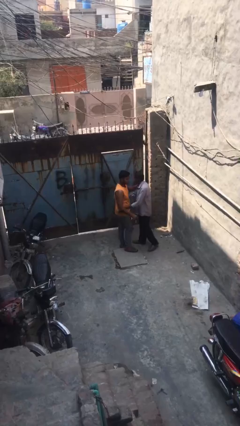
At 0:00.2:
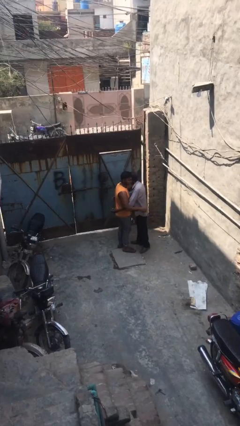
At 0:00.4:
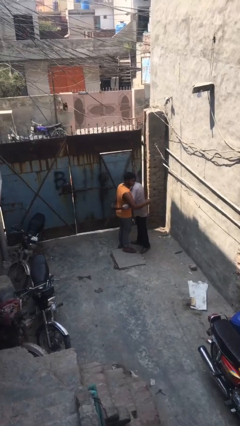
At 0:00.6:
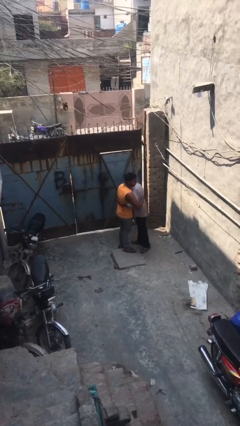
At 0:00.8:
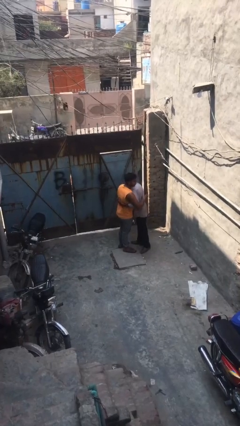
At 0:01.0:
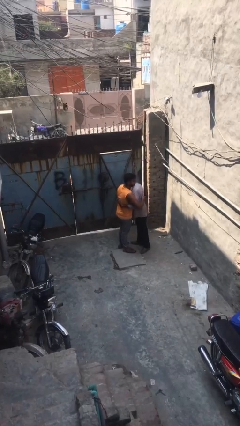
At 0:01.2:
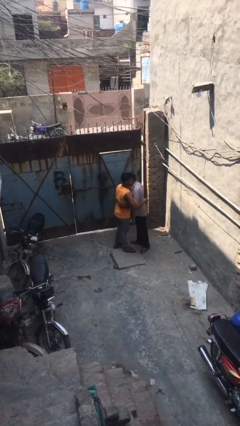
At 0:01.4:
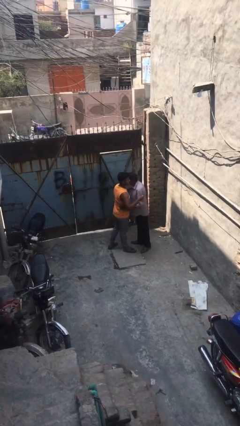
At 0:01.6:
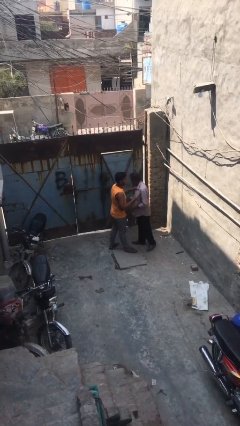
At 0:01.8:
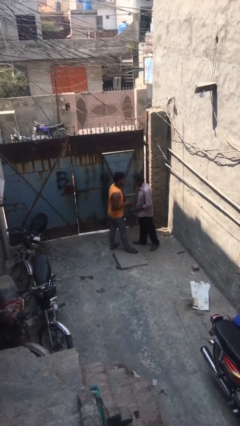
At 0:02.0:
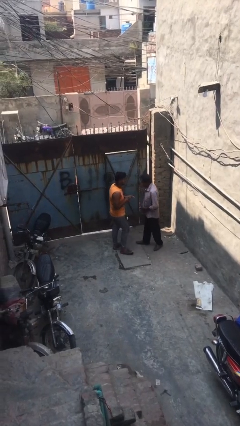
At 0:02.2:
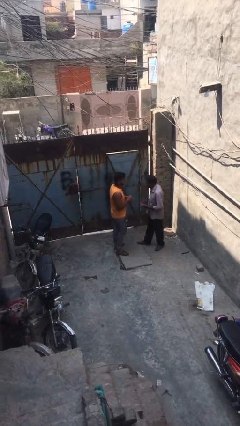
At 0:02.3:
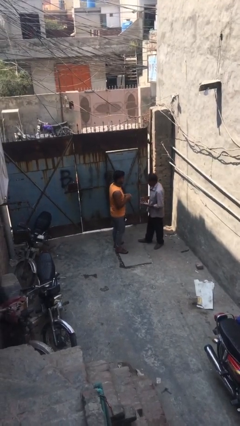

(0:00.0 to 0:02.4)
person embraces person

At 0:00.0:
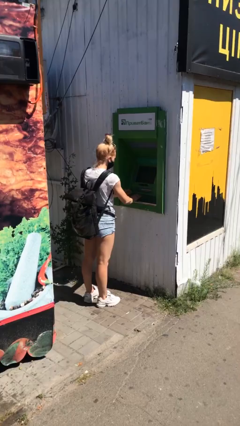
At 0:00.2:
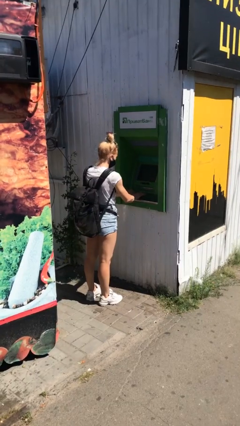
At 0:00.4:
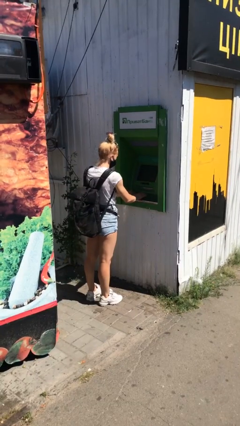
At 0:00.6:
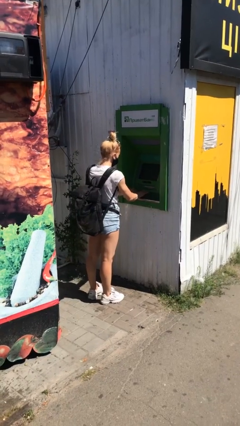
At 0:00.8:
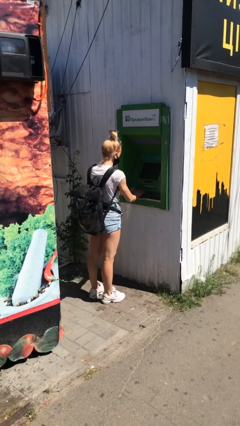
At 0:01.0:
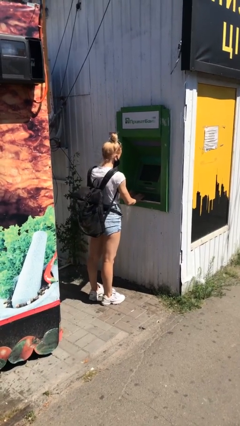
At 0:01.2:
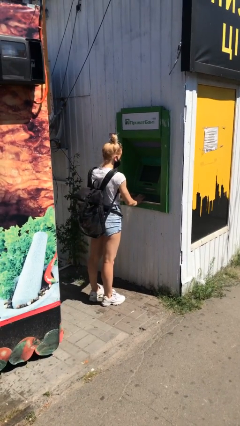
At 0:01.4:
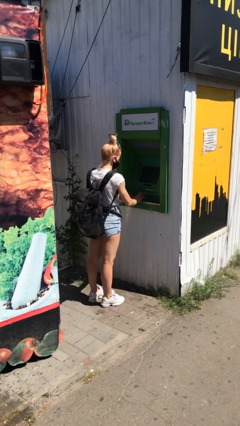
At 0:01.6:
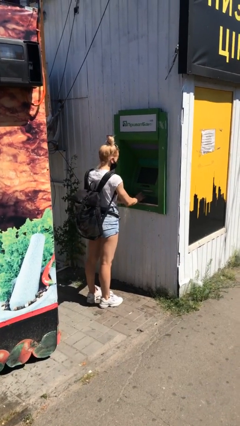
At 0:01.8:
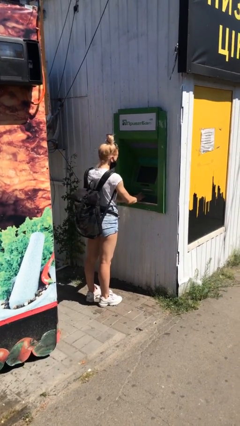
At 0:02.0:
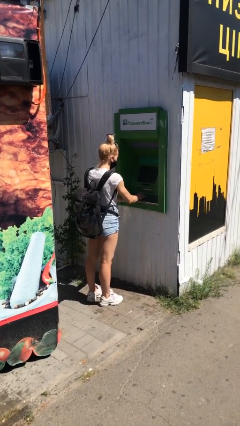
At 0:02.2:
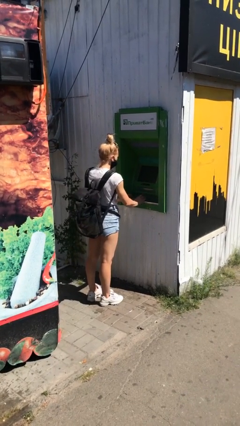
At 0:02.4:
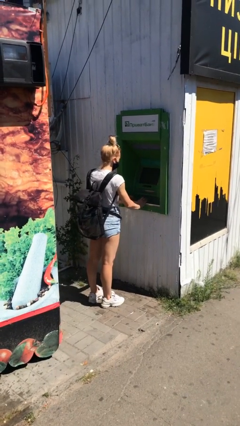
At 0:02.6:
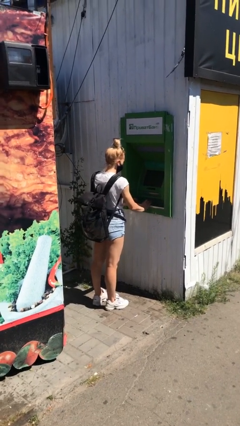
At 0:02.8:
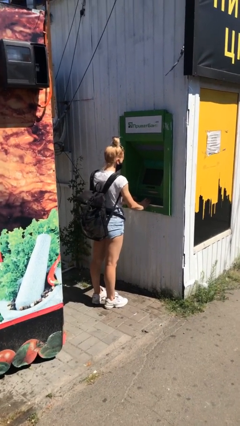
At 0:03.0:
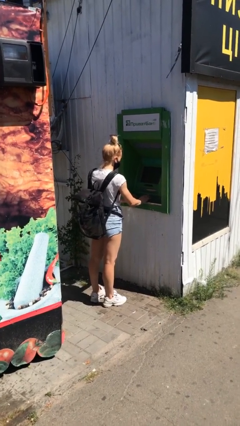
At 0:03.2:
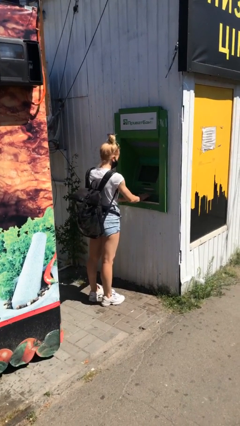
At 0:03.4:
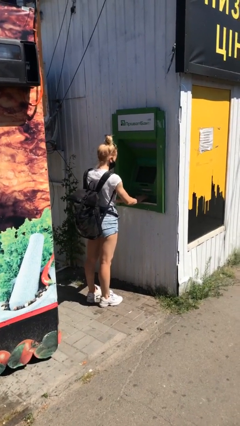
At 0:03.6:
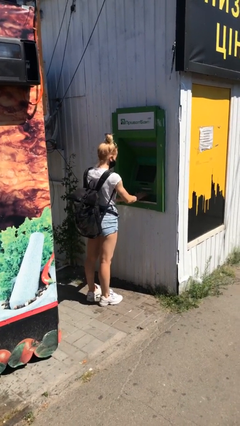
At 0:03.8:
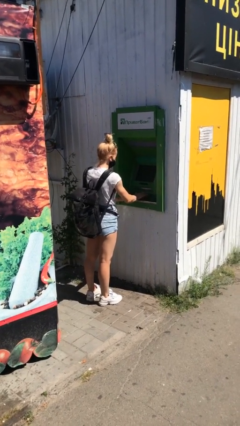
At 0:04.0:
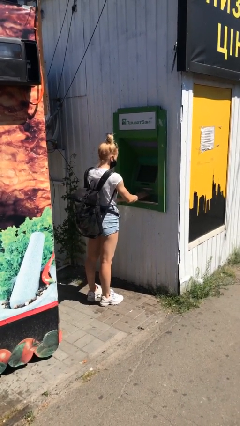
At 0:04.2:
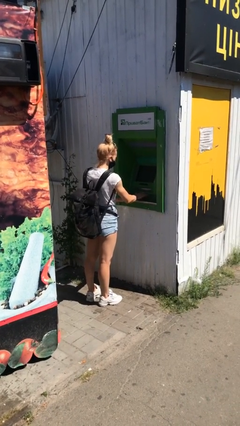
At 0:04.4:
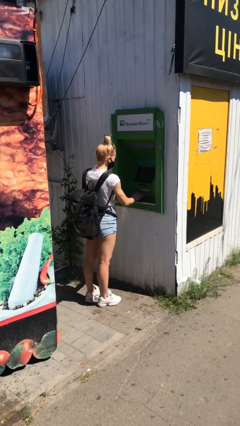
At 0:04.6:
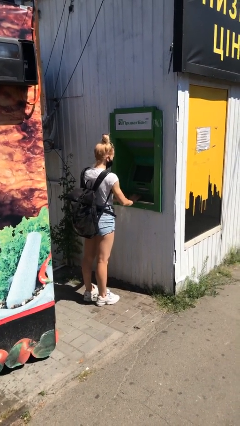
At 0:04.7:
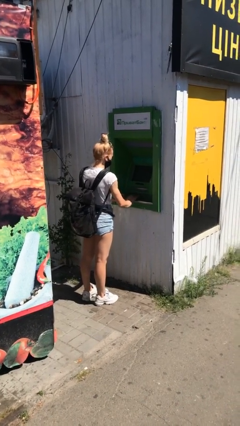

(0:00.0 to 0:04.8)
person purchases from machine

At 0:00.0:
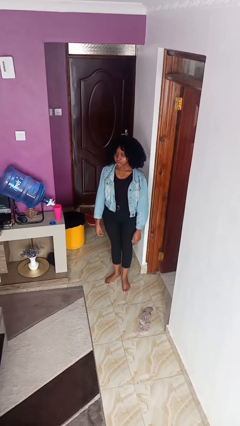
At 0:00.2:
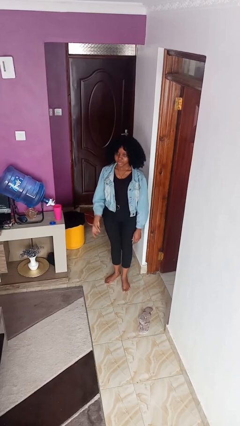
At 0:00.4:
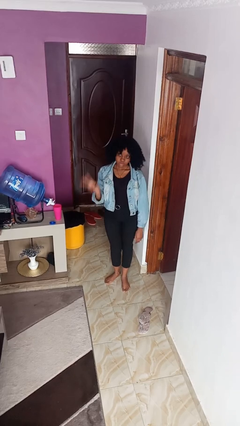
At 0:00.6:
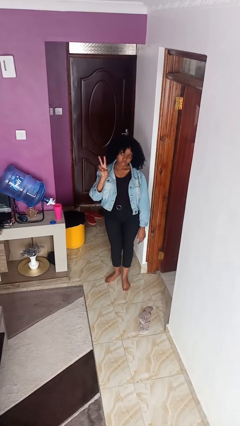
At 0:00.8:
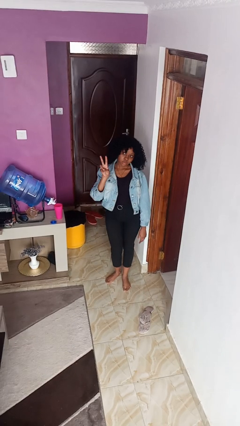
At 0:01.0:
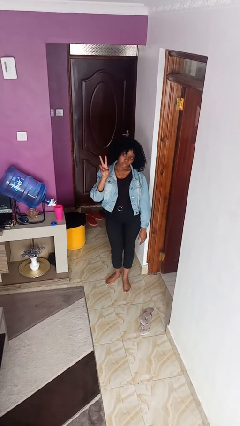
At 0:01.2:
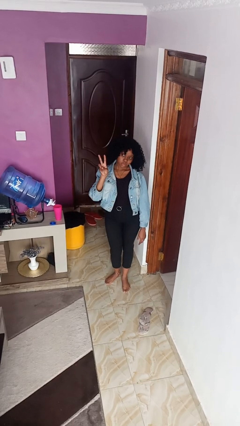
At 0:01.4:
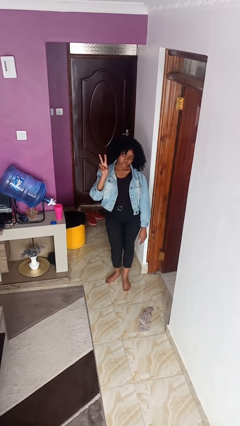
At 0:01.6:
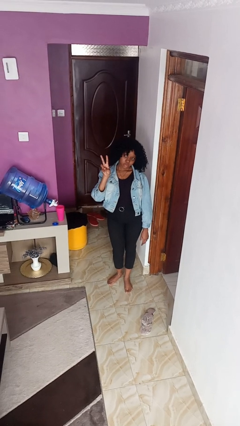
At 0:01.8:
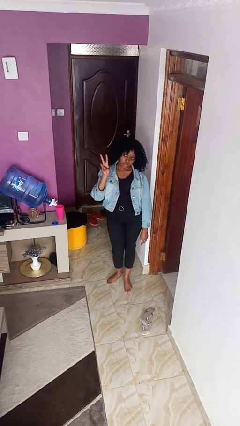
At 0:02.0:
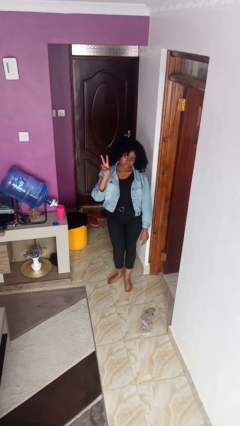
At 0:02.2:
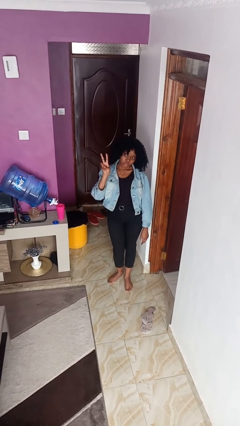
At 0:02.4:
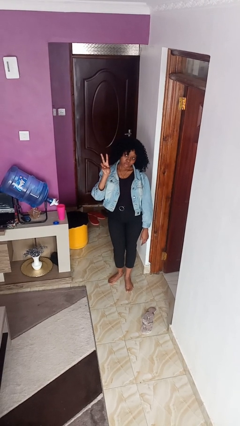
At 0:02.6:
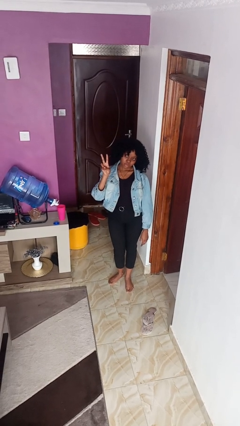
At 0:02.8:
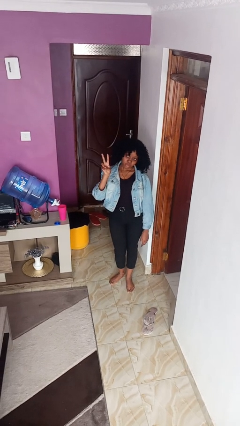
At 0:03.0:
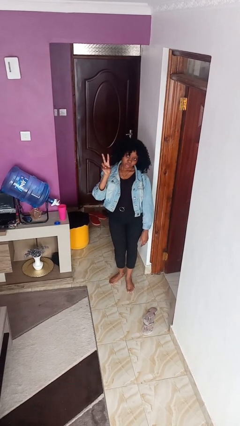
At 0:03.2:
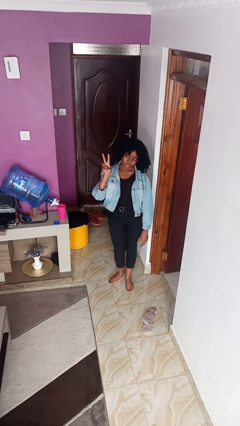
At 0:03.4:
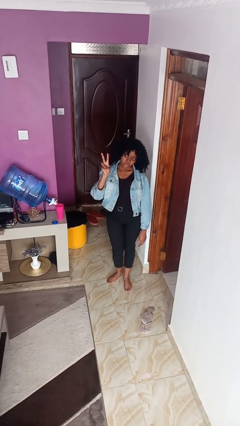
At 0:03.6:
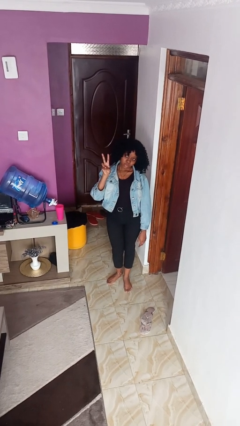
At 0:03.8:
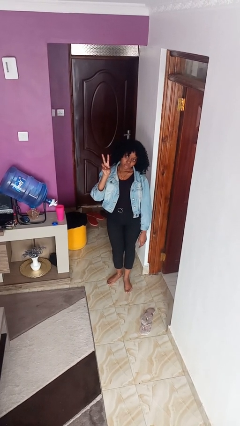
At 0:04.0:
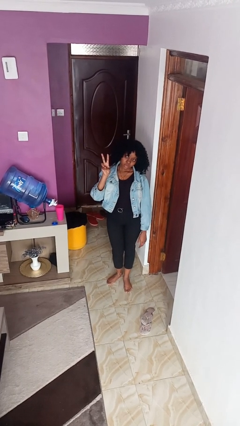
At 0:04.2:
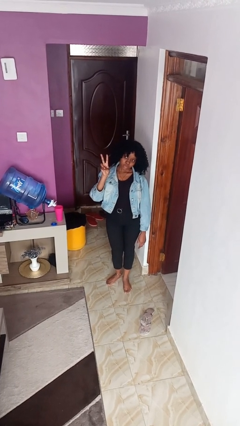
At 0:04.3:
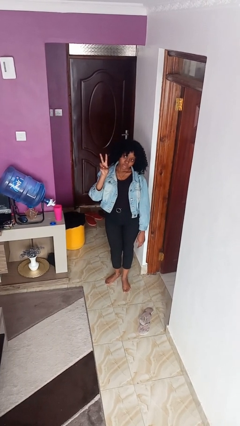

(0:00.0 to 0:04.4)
person gestures peace

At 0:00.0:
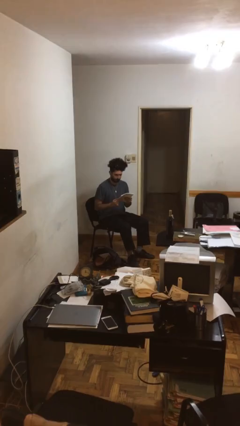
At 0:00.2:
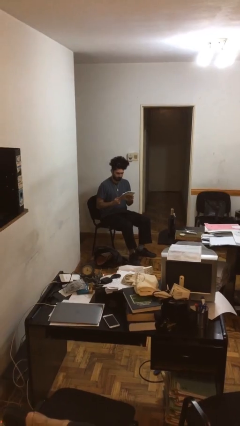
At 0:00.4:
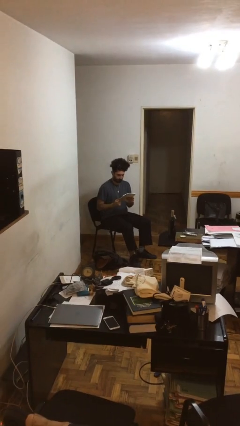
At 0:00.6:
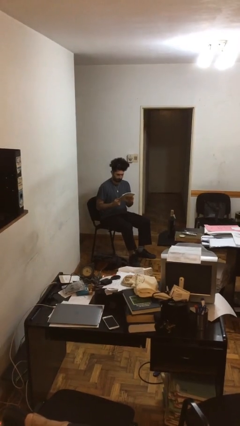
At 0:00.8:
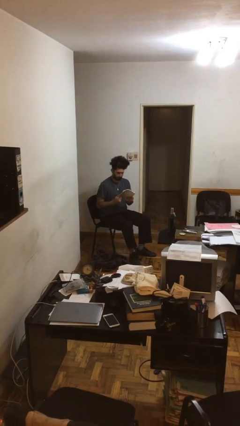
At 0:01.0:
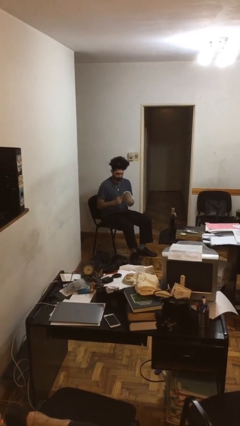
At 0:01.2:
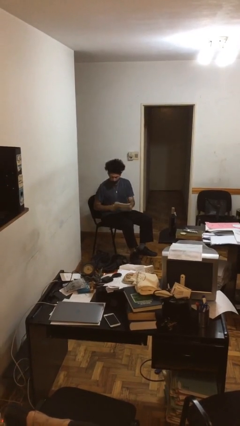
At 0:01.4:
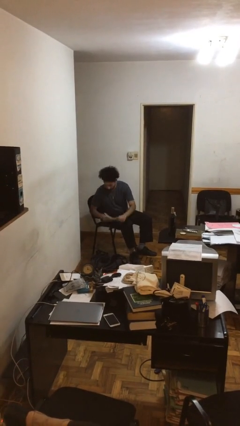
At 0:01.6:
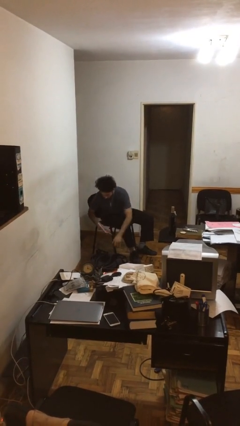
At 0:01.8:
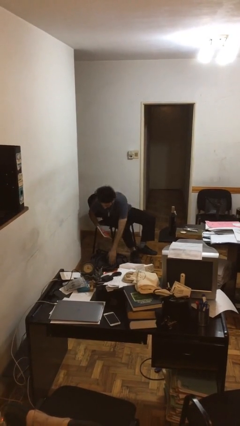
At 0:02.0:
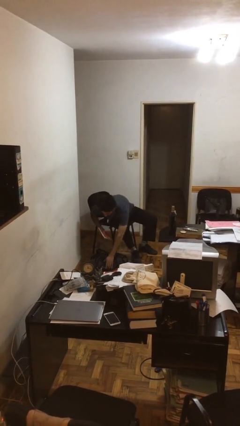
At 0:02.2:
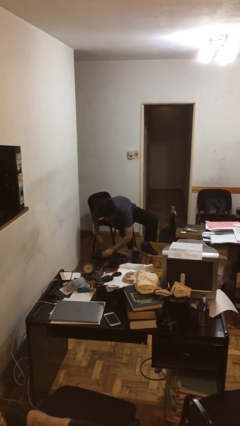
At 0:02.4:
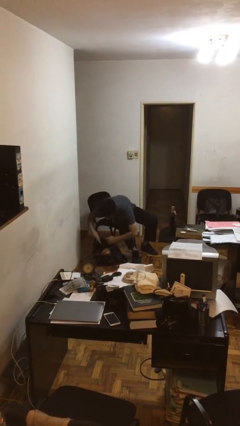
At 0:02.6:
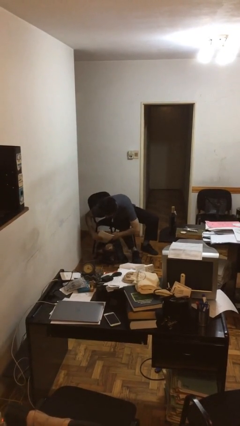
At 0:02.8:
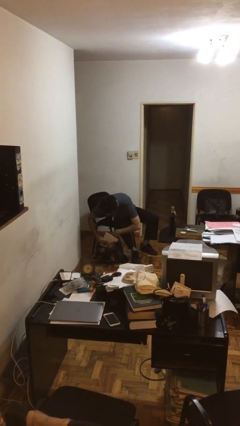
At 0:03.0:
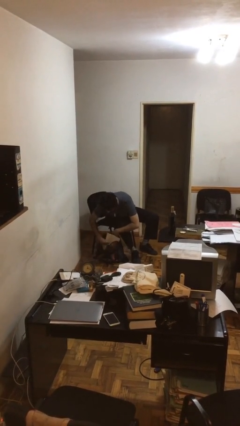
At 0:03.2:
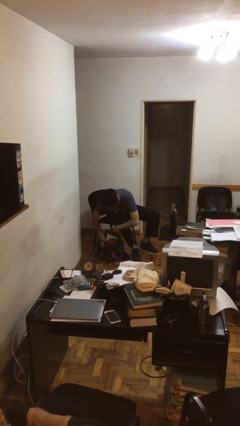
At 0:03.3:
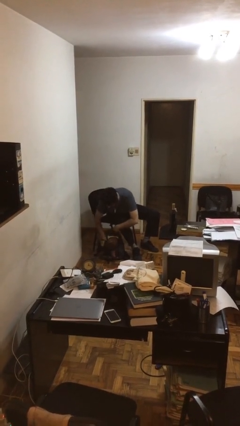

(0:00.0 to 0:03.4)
person puts object into backpack

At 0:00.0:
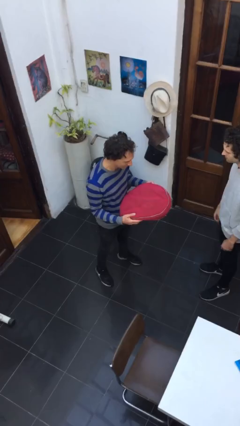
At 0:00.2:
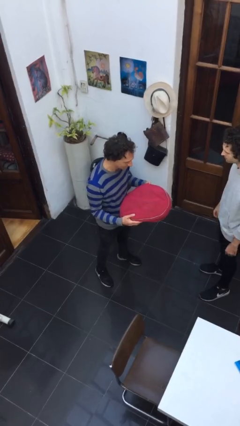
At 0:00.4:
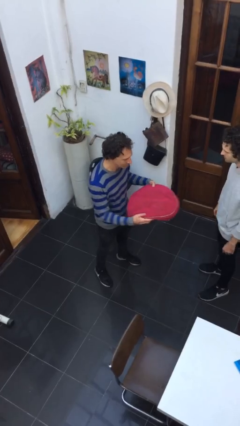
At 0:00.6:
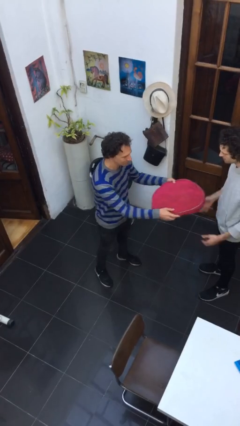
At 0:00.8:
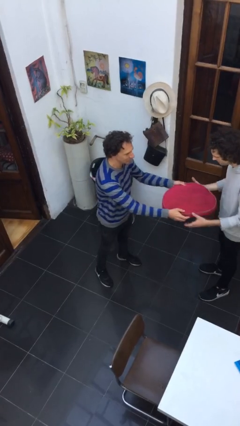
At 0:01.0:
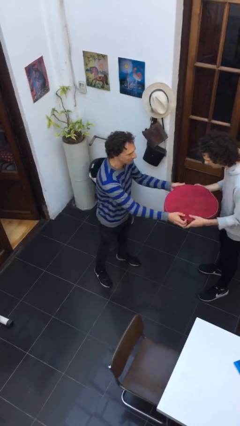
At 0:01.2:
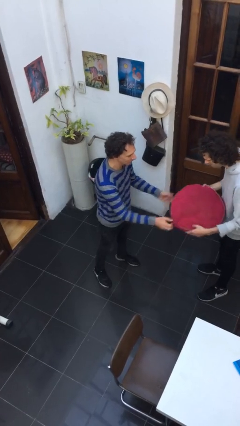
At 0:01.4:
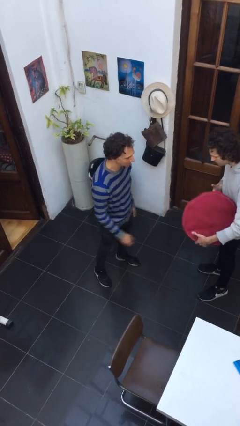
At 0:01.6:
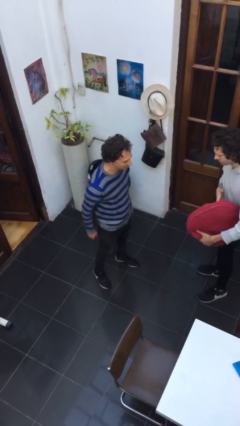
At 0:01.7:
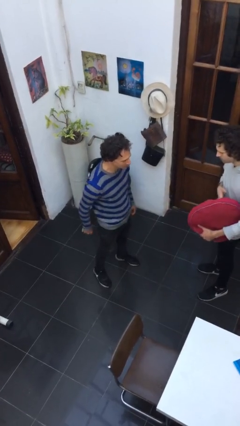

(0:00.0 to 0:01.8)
person transfers object to person

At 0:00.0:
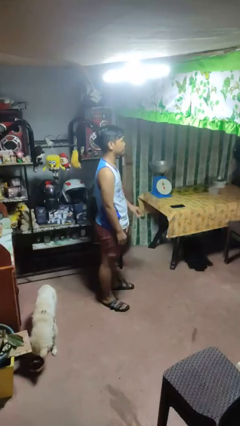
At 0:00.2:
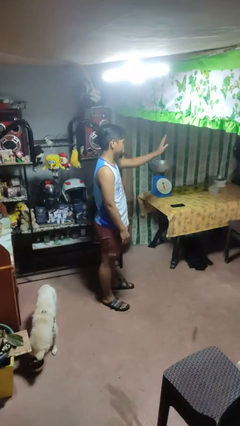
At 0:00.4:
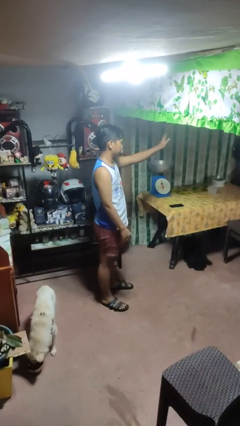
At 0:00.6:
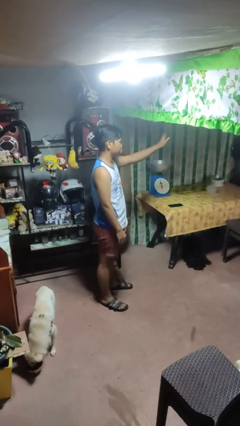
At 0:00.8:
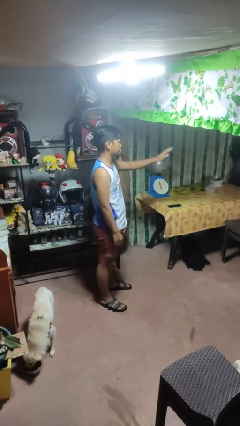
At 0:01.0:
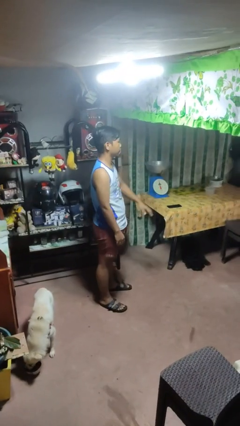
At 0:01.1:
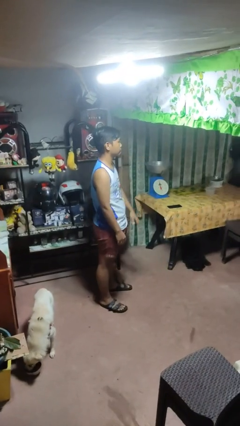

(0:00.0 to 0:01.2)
person gestures stop
